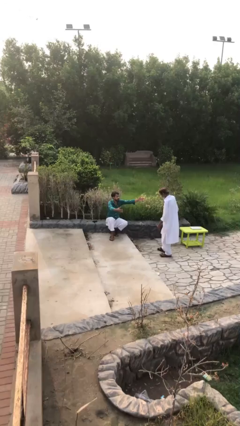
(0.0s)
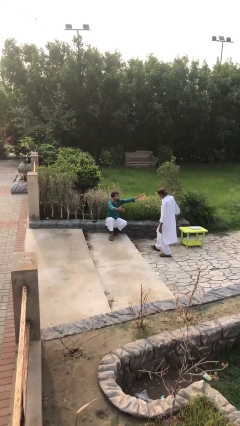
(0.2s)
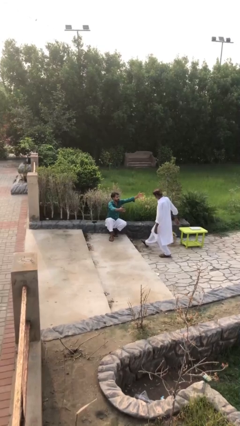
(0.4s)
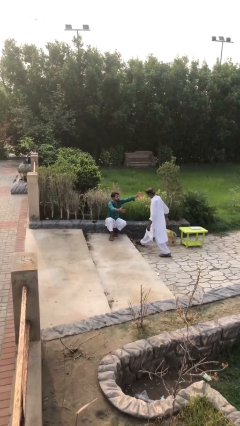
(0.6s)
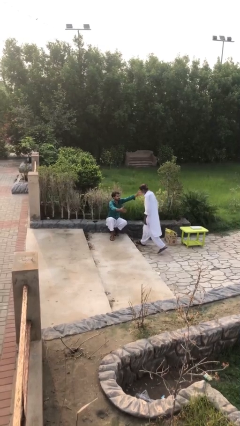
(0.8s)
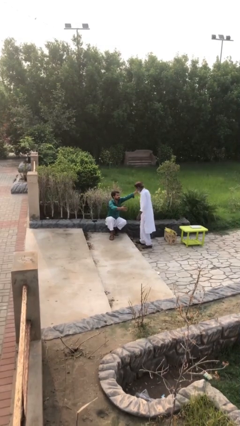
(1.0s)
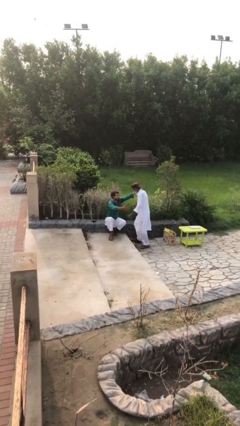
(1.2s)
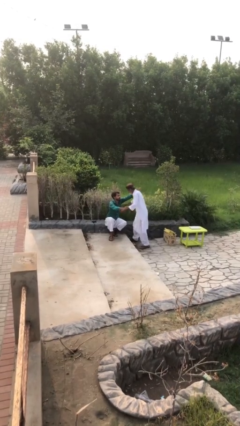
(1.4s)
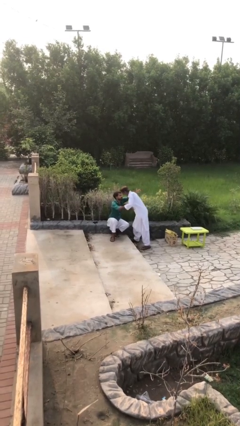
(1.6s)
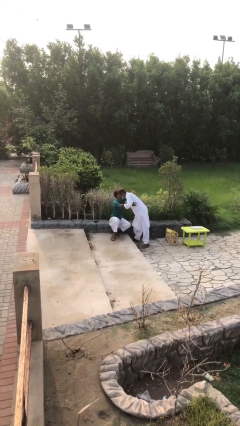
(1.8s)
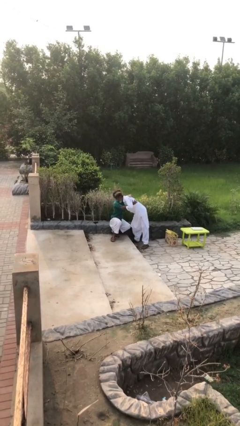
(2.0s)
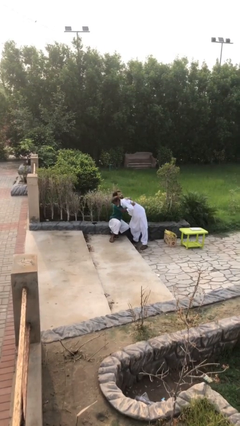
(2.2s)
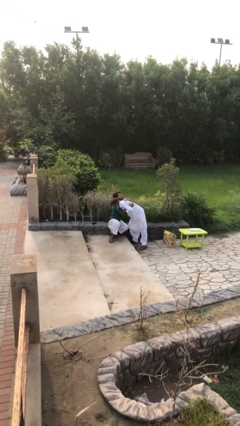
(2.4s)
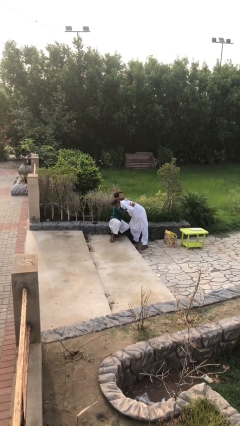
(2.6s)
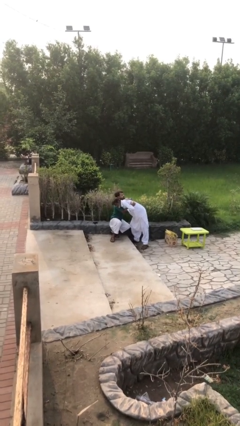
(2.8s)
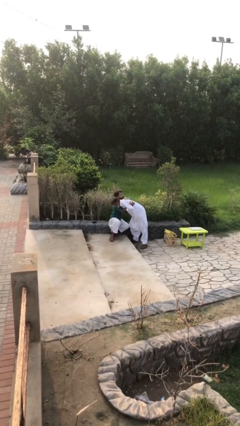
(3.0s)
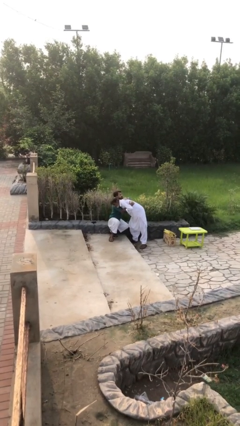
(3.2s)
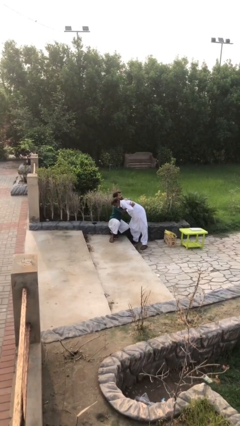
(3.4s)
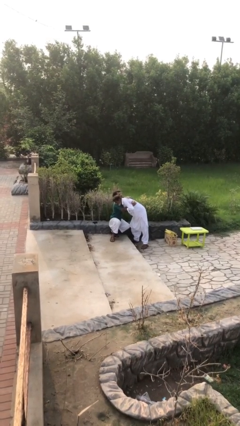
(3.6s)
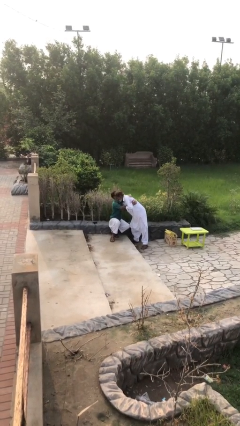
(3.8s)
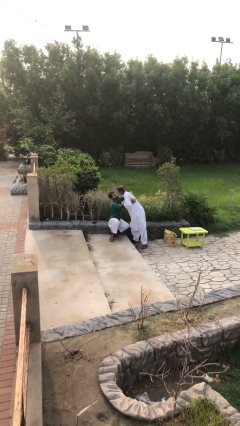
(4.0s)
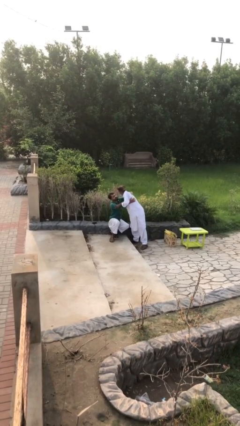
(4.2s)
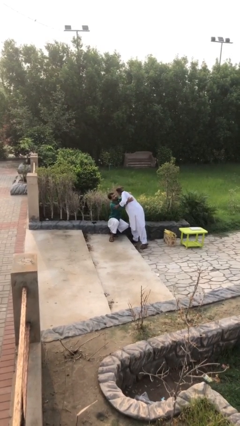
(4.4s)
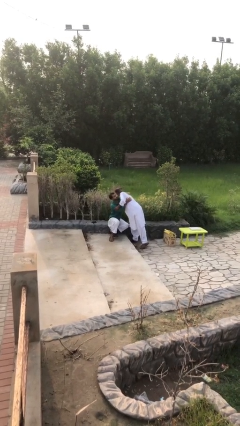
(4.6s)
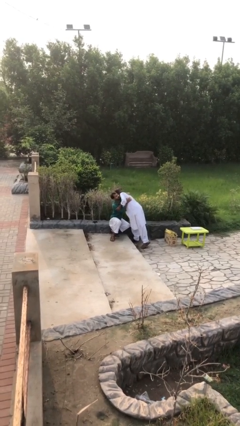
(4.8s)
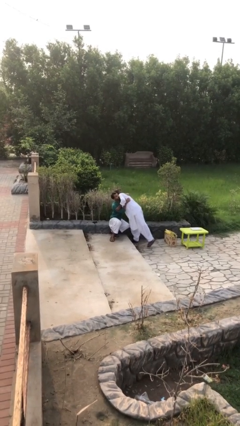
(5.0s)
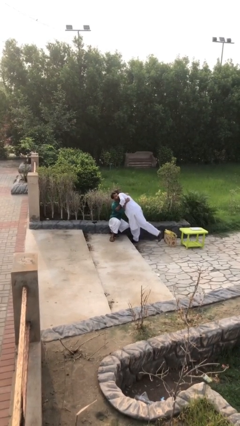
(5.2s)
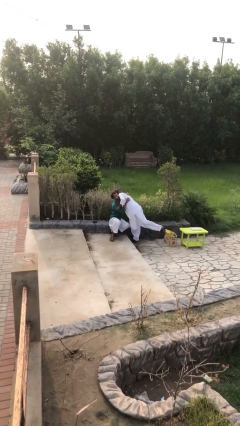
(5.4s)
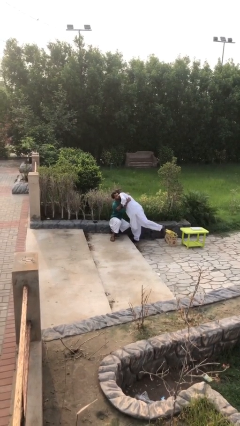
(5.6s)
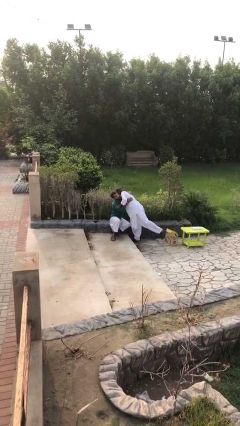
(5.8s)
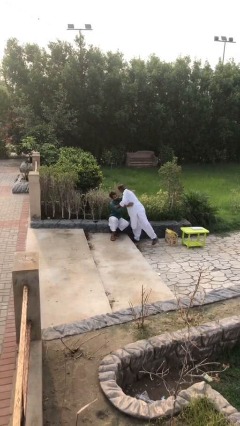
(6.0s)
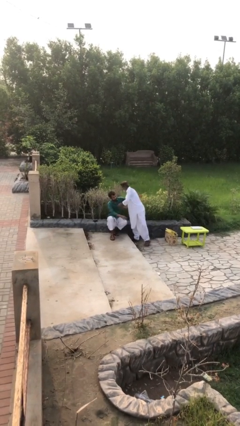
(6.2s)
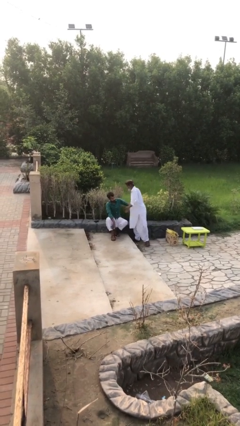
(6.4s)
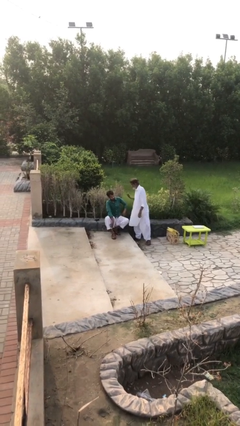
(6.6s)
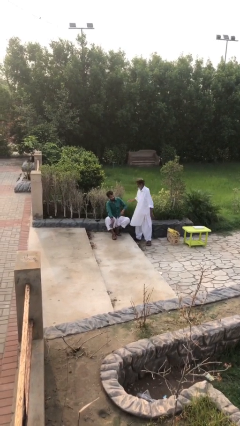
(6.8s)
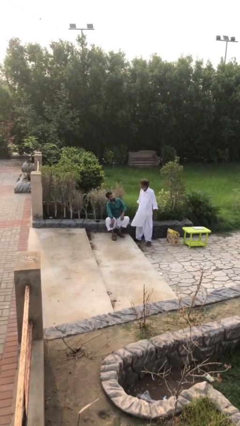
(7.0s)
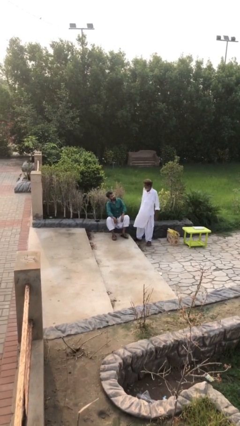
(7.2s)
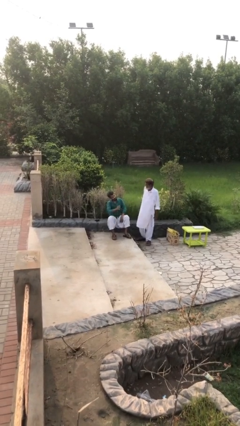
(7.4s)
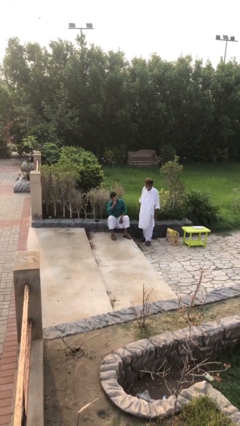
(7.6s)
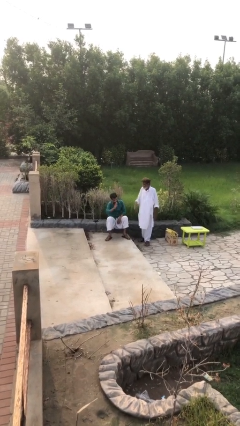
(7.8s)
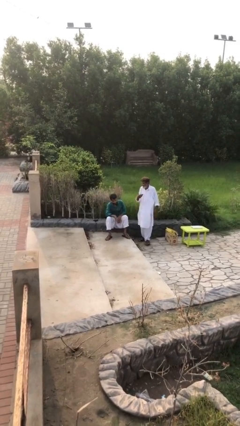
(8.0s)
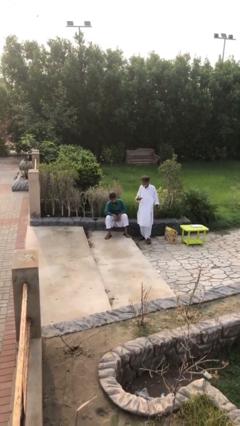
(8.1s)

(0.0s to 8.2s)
person embraces person

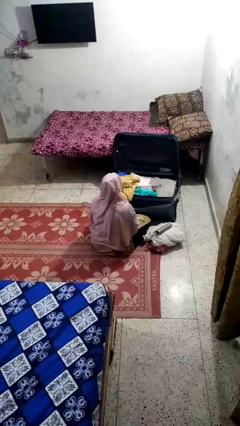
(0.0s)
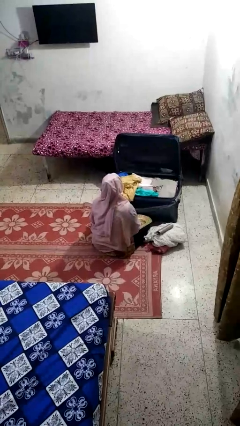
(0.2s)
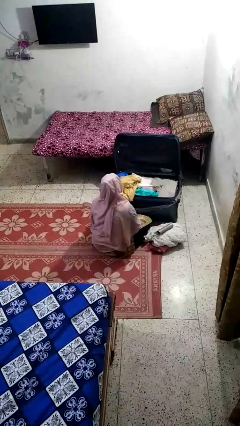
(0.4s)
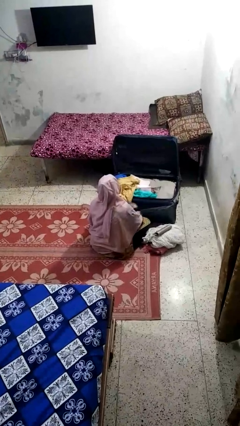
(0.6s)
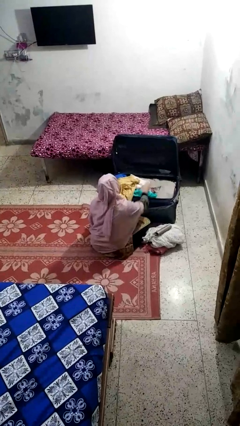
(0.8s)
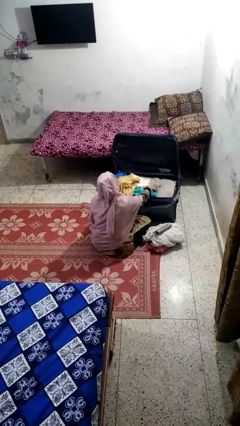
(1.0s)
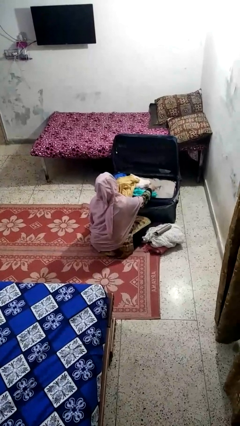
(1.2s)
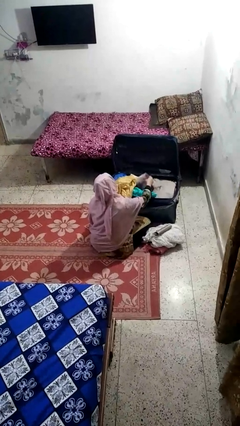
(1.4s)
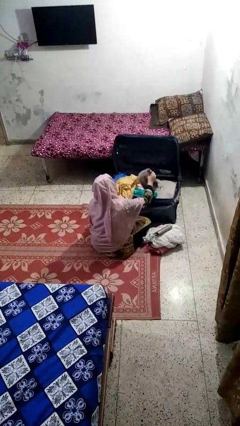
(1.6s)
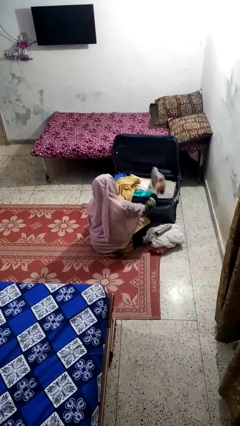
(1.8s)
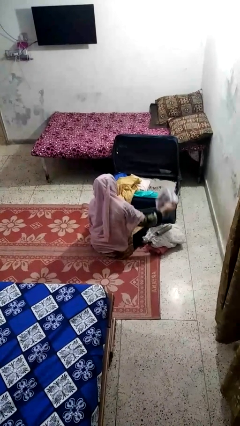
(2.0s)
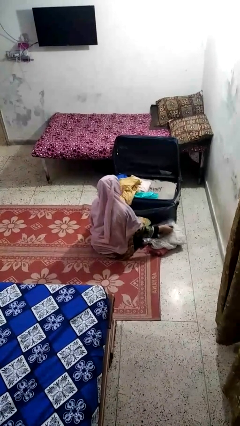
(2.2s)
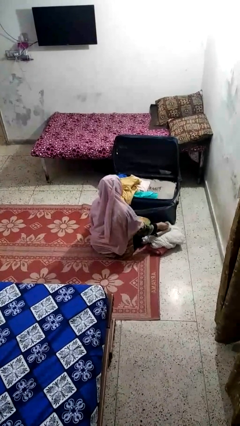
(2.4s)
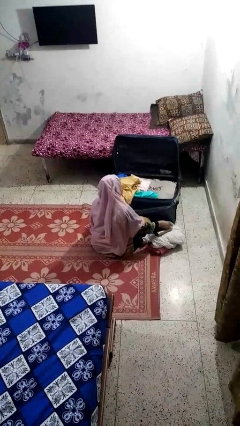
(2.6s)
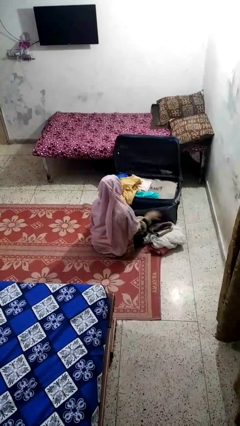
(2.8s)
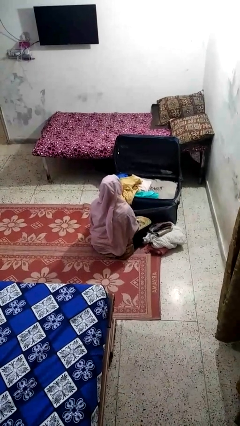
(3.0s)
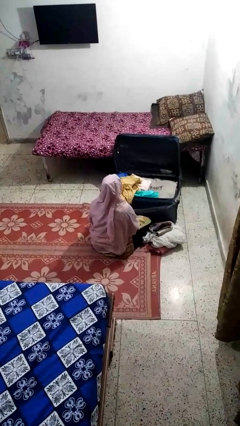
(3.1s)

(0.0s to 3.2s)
person unloads clothes from suitcase

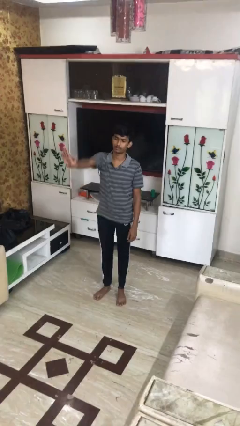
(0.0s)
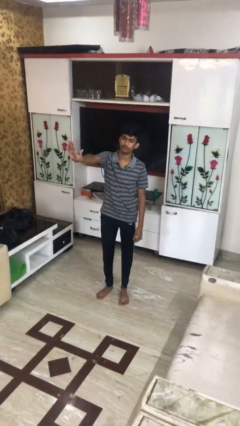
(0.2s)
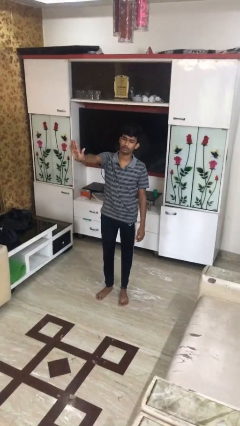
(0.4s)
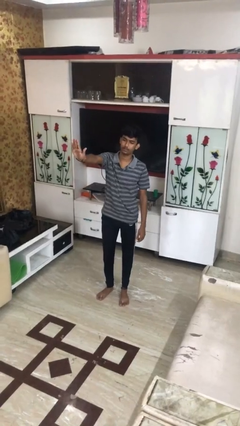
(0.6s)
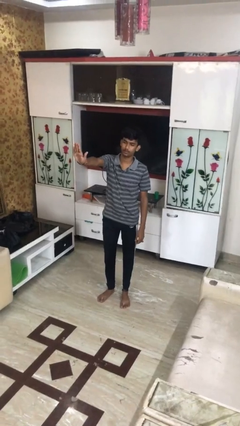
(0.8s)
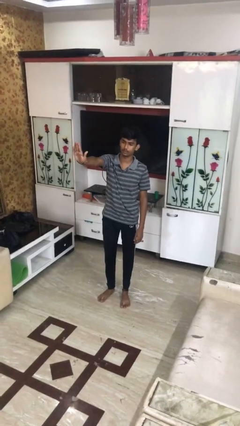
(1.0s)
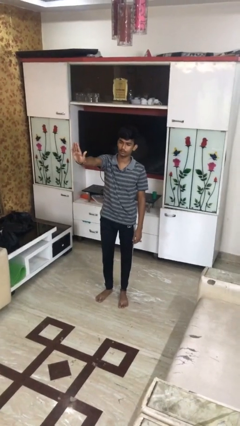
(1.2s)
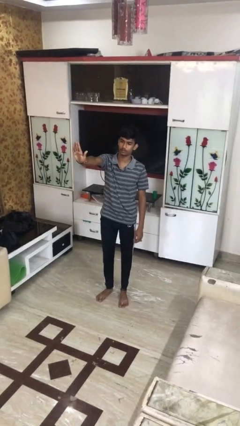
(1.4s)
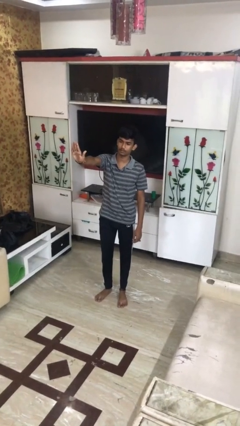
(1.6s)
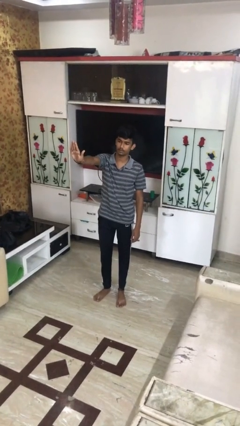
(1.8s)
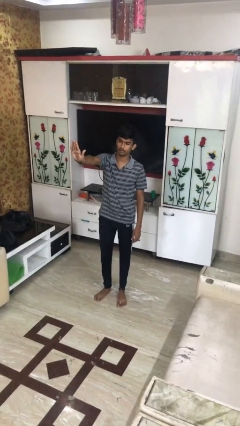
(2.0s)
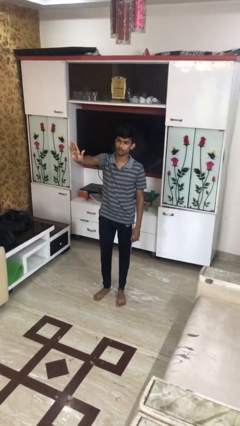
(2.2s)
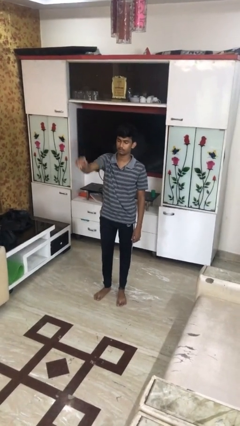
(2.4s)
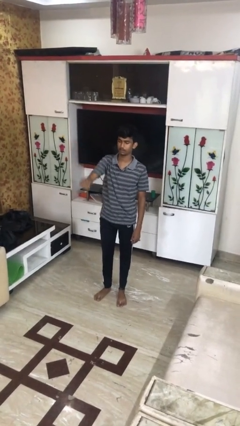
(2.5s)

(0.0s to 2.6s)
person gestures stop

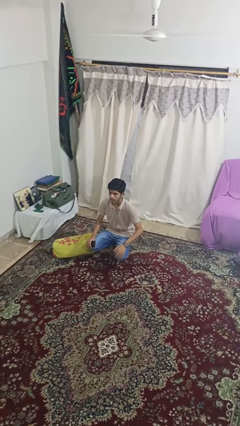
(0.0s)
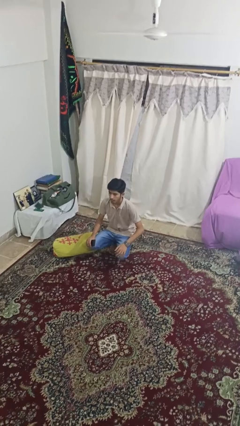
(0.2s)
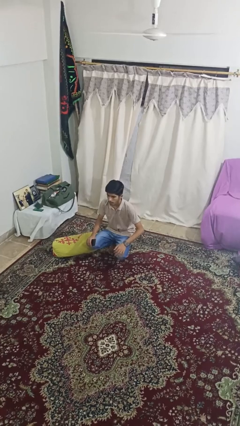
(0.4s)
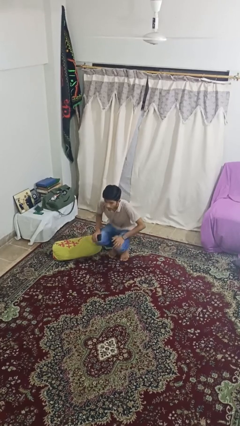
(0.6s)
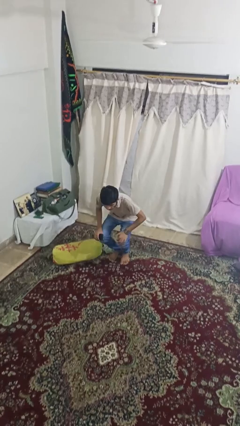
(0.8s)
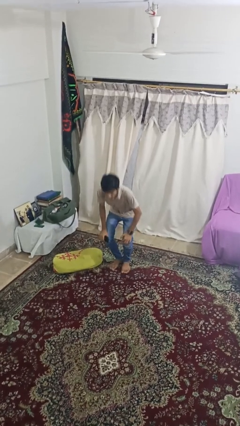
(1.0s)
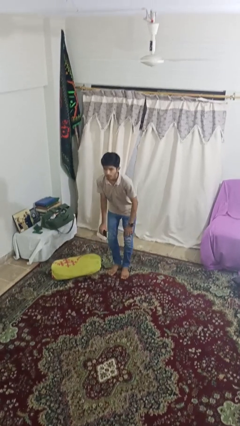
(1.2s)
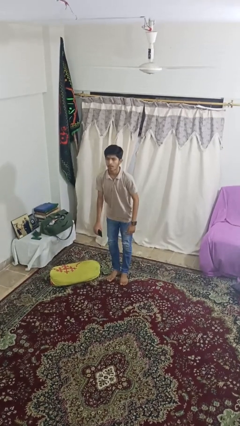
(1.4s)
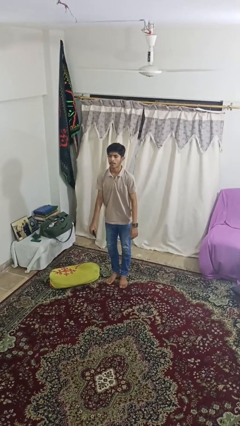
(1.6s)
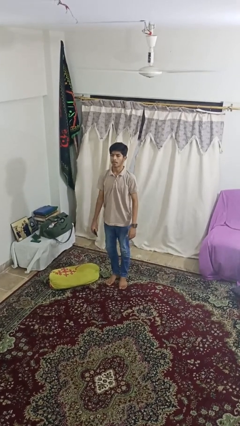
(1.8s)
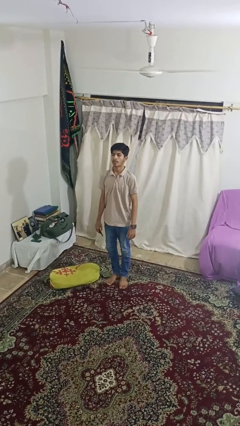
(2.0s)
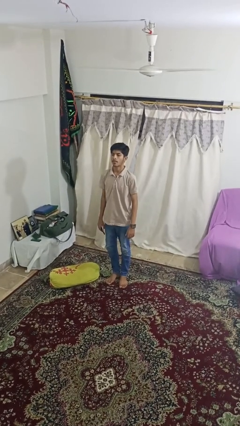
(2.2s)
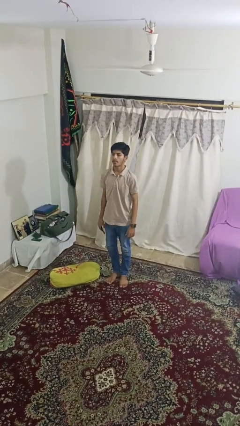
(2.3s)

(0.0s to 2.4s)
person stands up

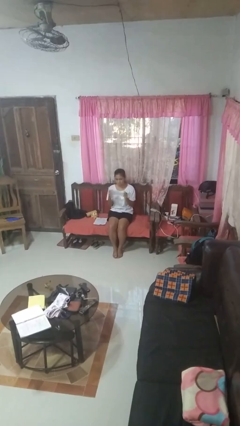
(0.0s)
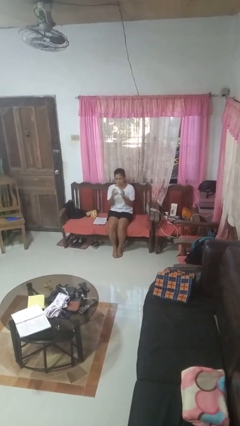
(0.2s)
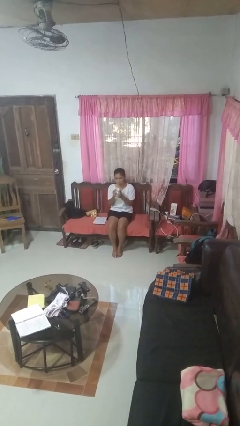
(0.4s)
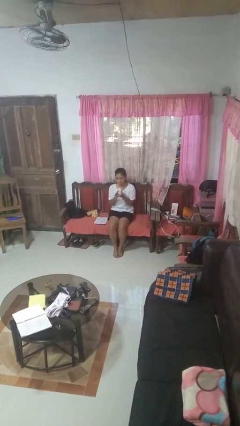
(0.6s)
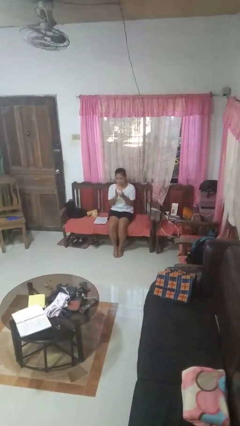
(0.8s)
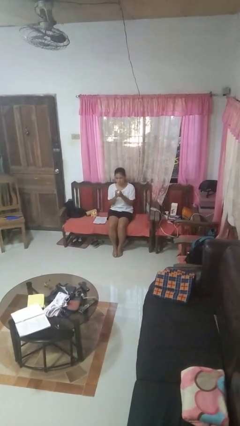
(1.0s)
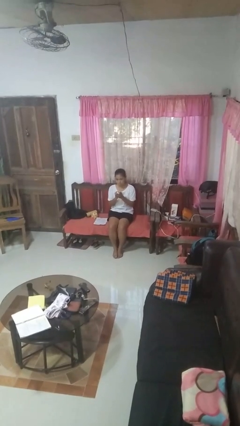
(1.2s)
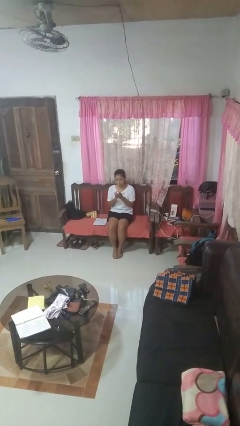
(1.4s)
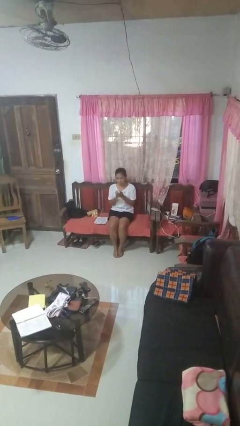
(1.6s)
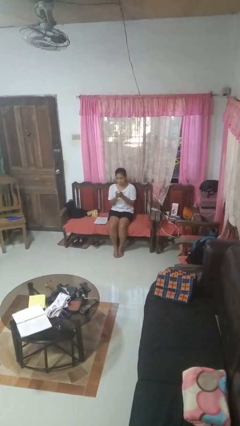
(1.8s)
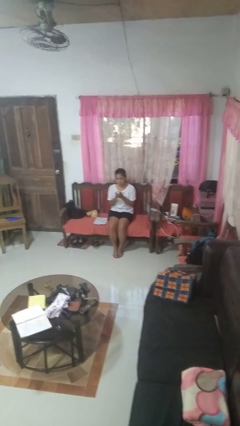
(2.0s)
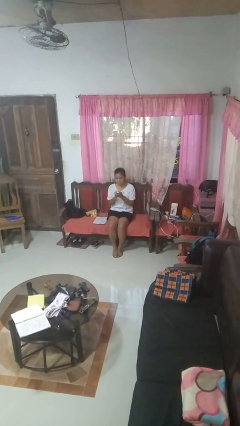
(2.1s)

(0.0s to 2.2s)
person crumples paper
